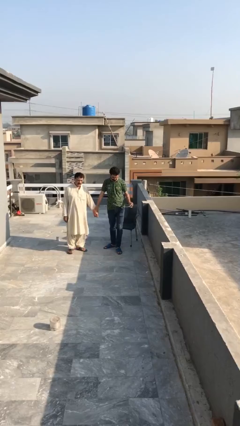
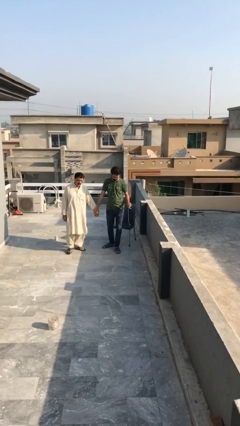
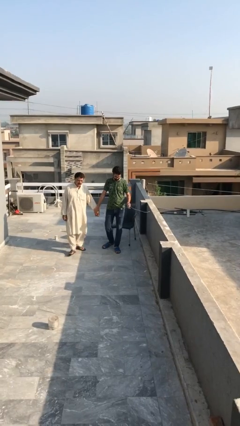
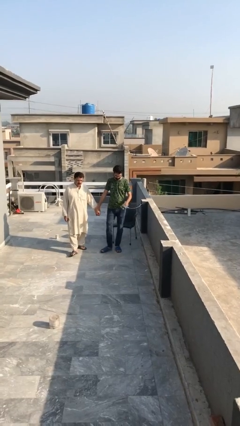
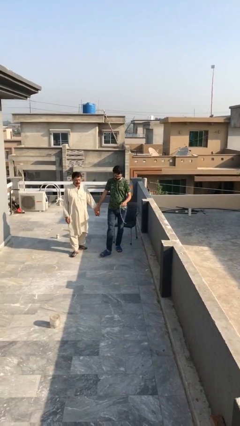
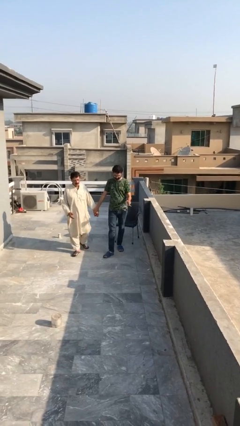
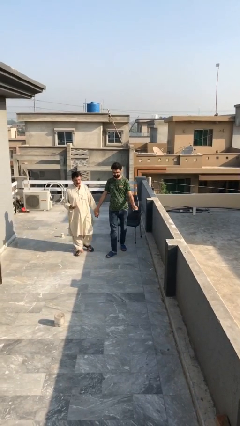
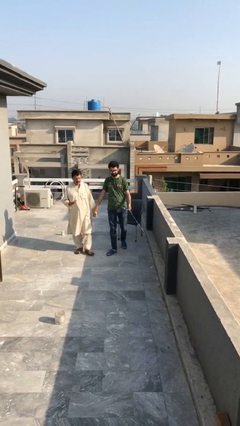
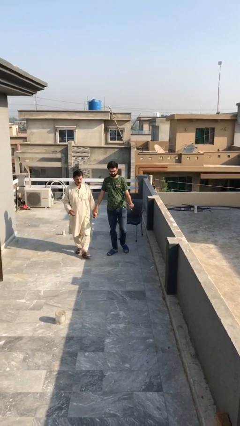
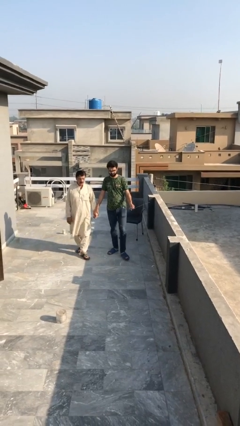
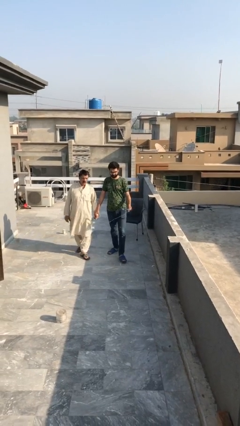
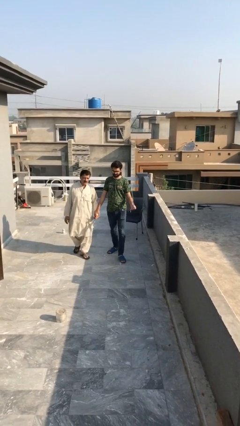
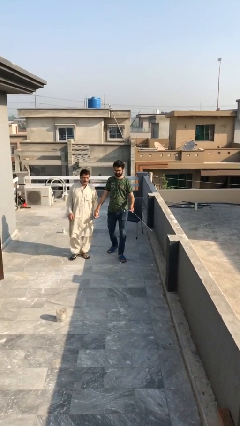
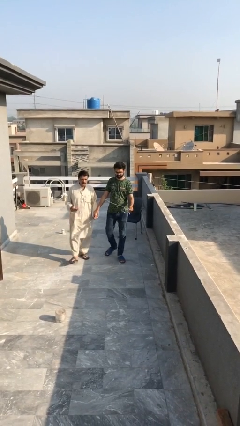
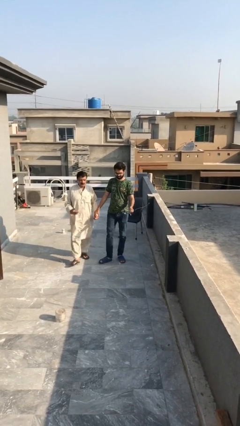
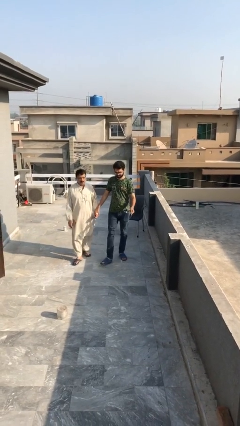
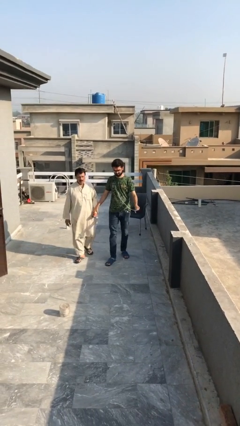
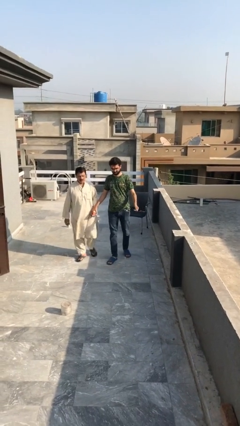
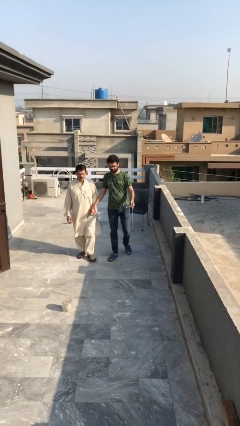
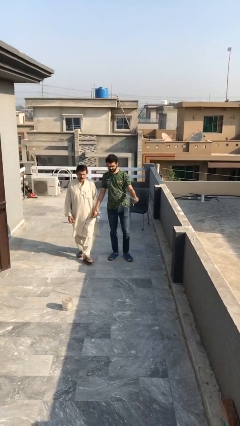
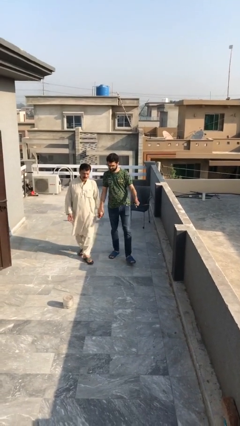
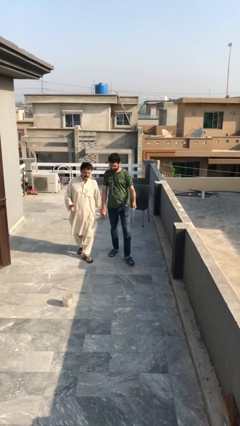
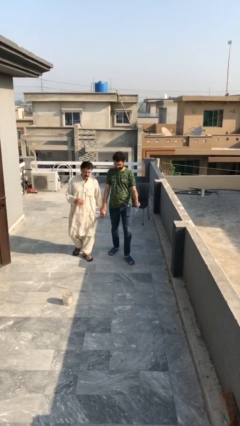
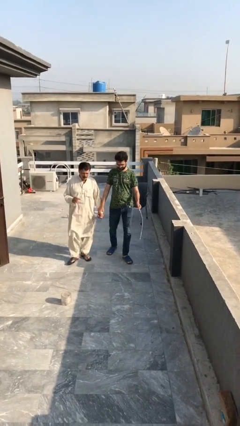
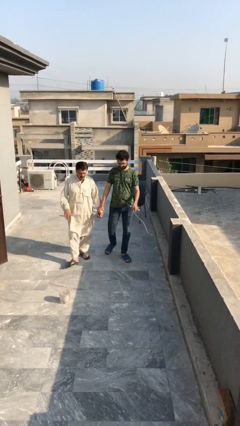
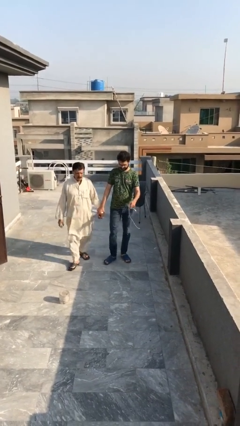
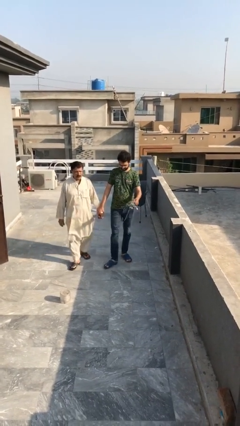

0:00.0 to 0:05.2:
person holds hand

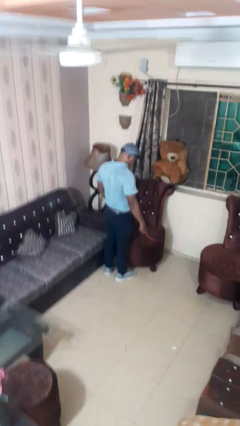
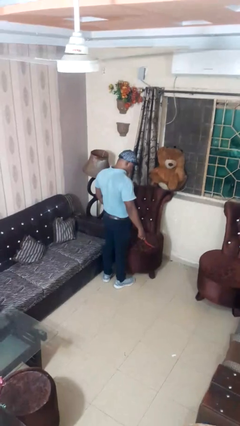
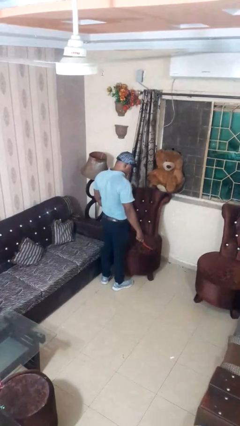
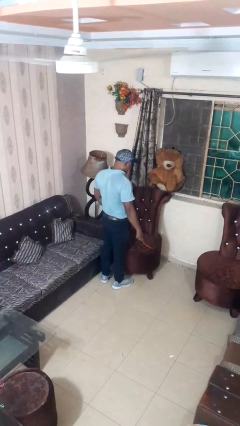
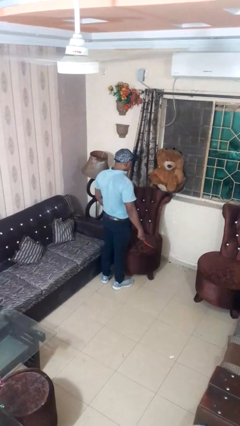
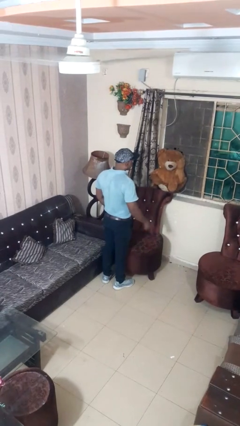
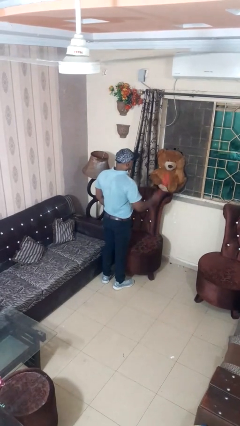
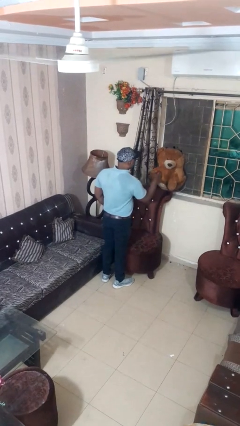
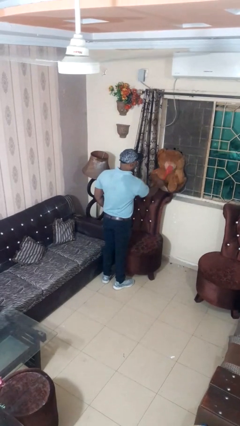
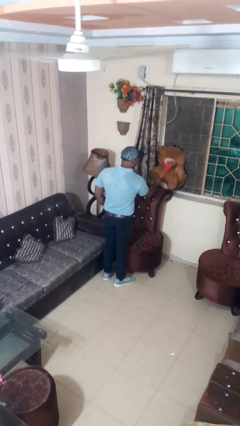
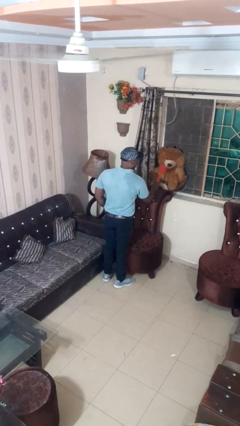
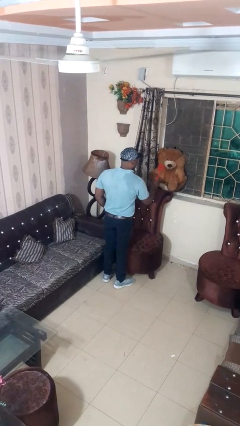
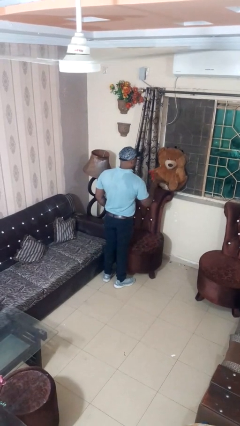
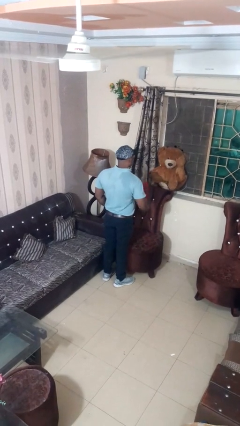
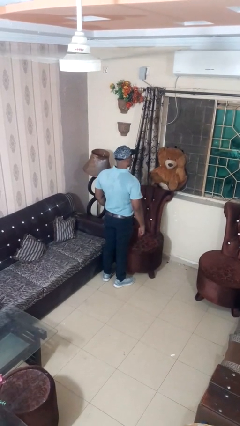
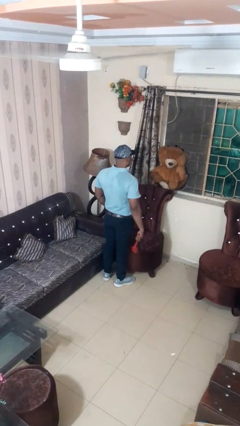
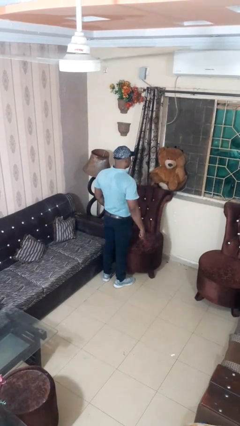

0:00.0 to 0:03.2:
person swats bug

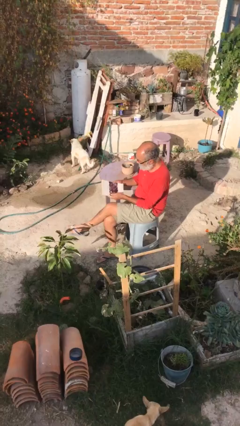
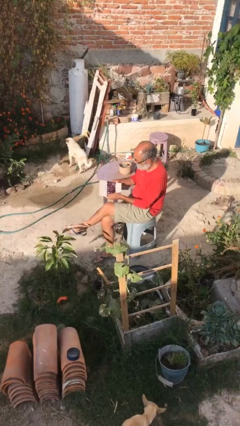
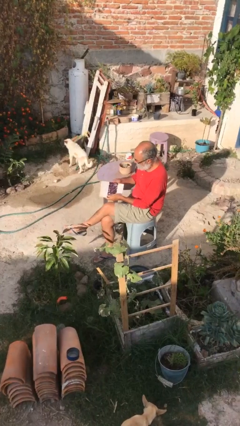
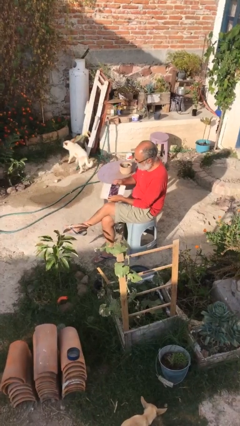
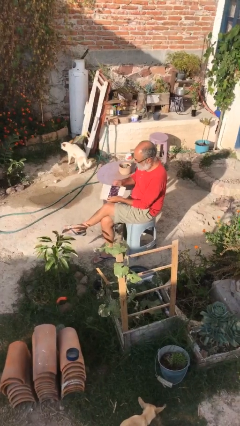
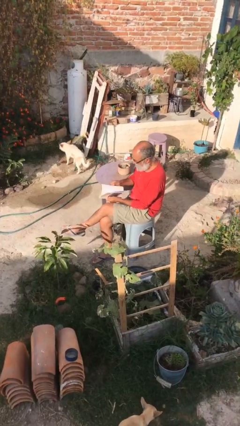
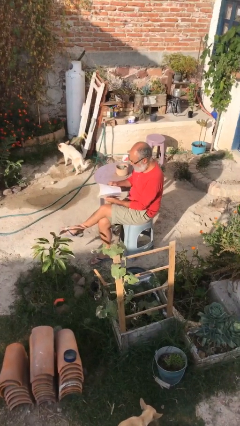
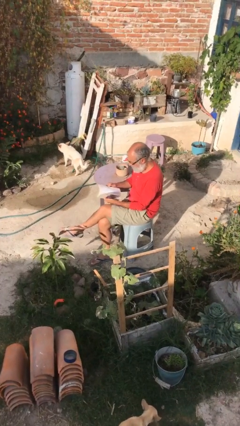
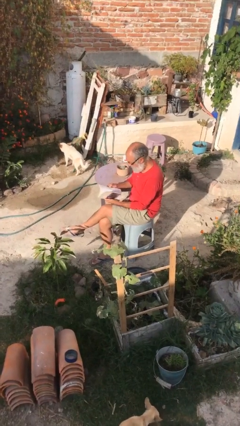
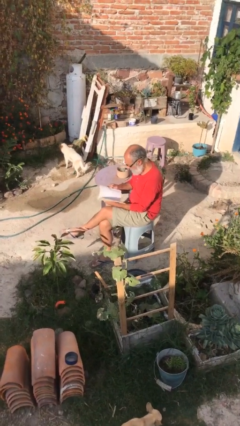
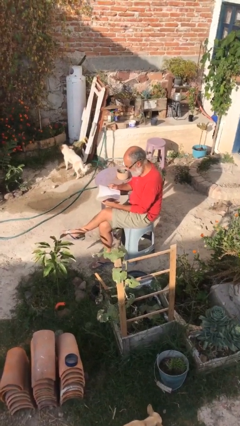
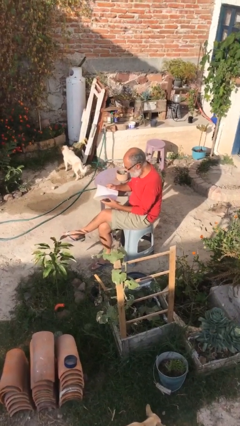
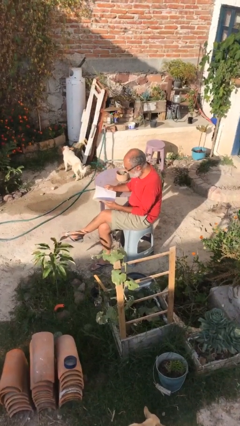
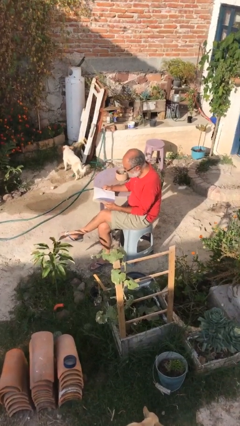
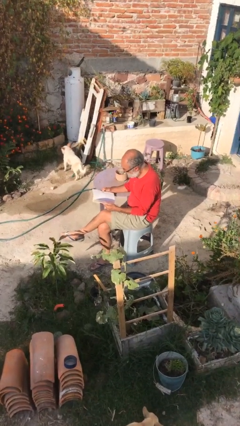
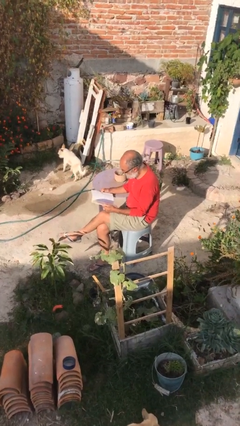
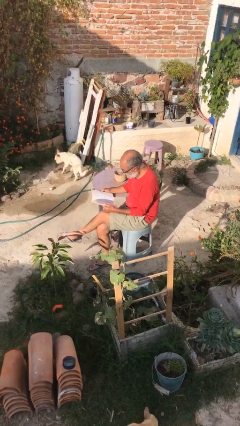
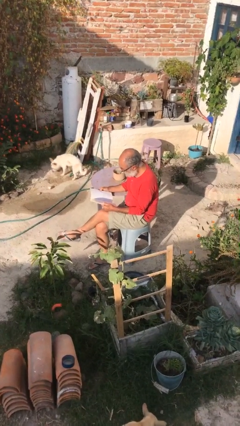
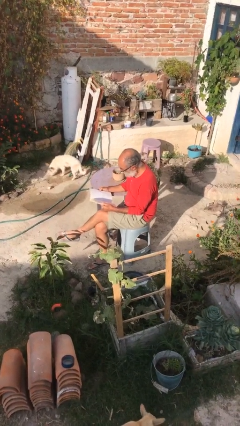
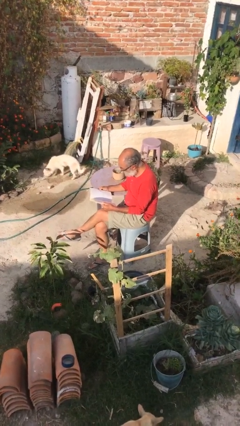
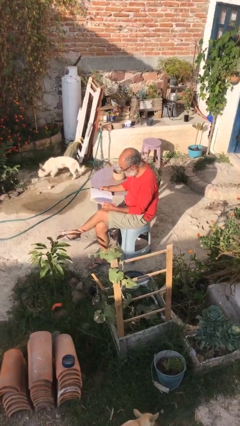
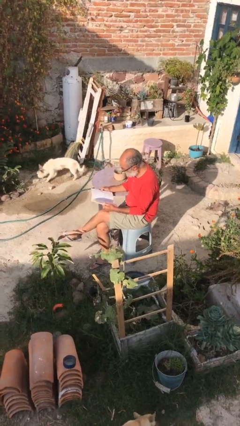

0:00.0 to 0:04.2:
person reads document

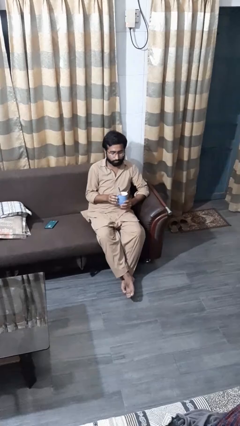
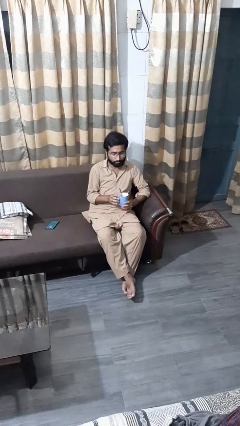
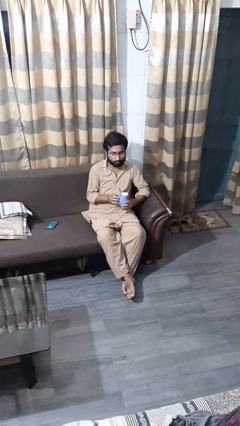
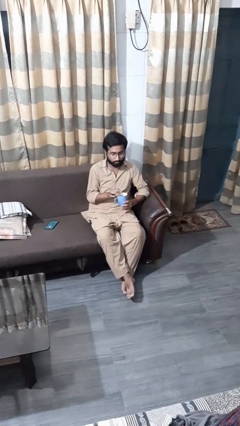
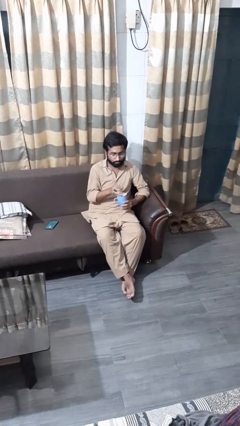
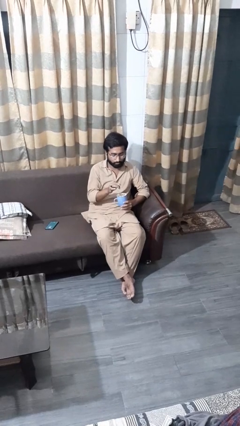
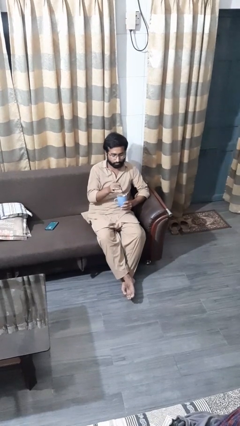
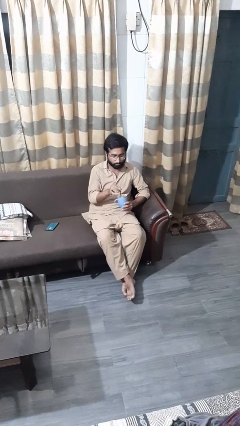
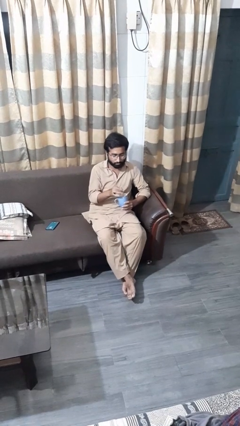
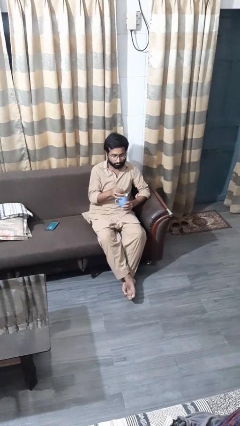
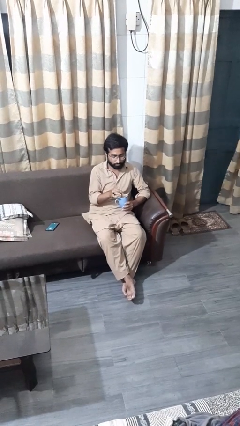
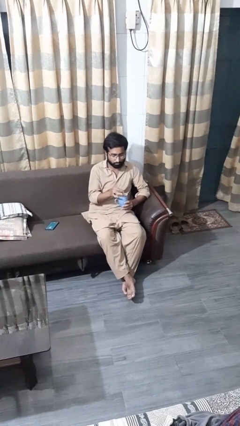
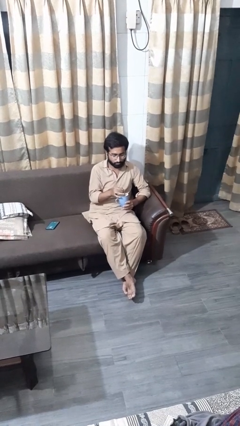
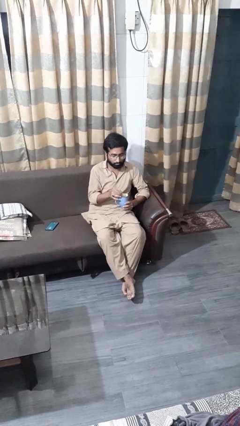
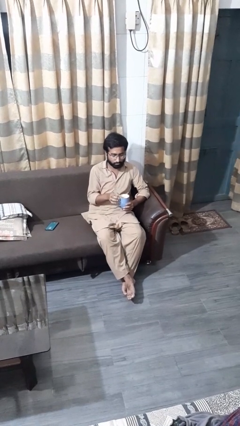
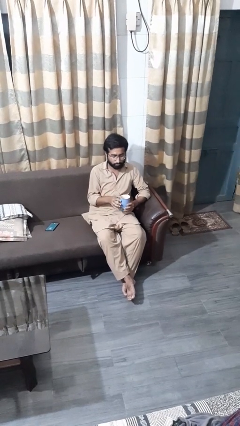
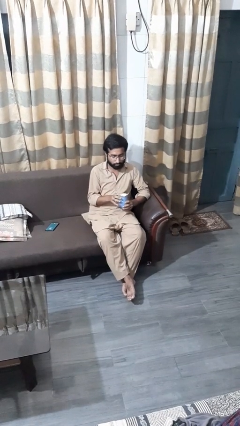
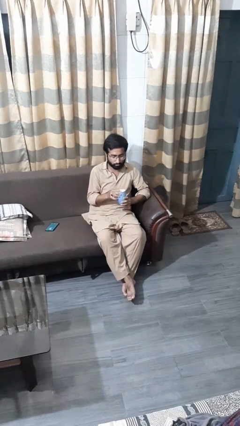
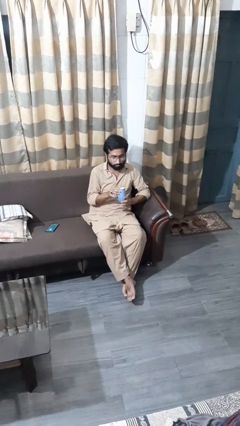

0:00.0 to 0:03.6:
person stirs mug

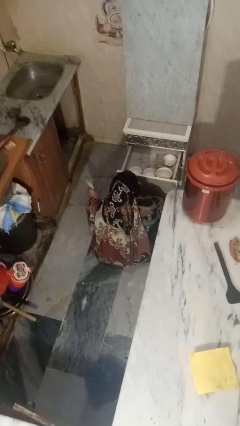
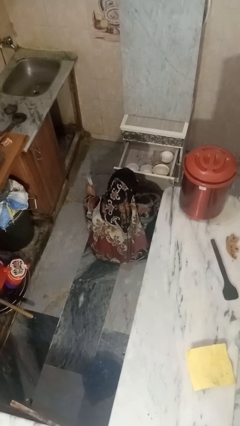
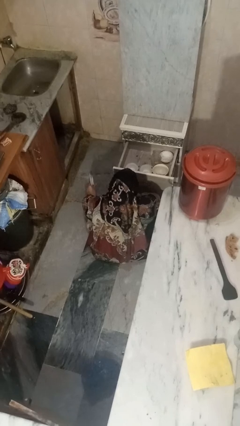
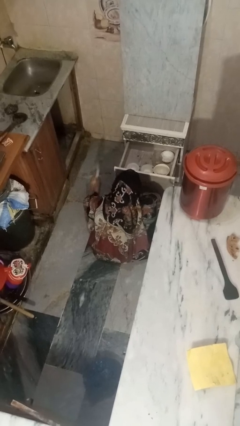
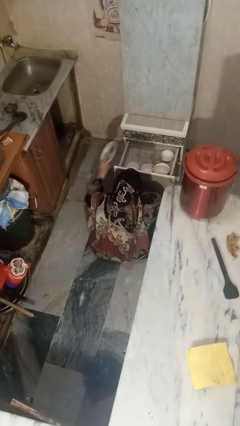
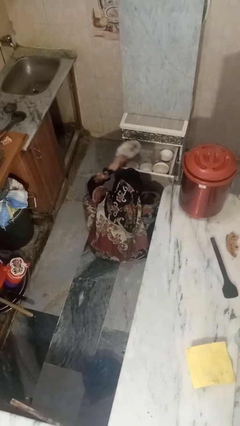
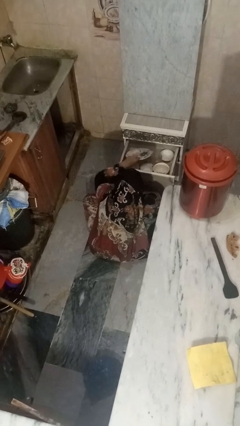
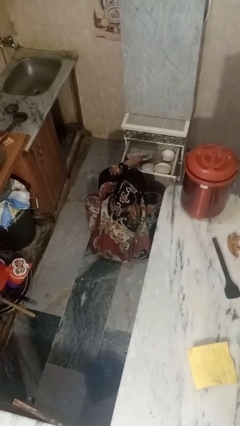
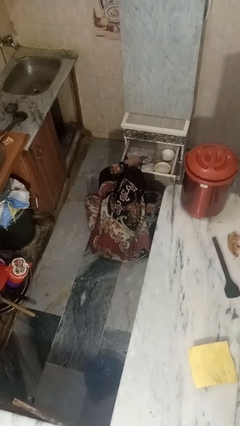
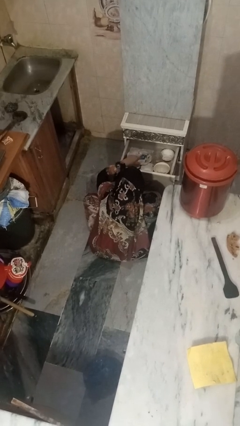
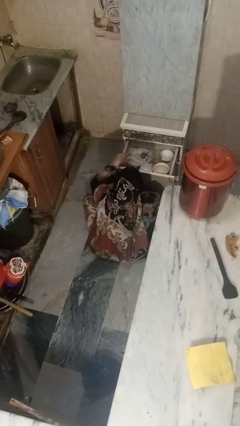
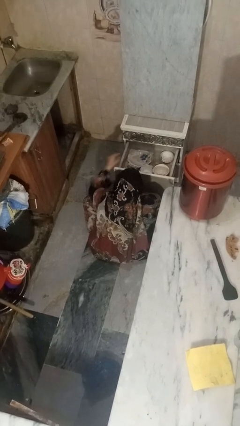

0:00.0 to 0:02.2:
person puts object into kitchen drawer
